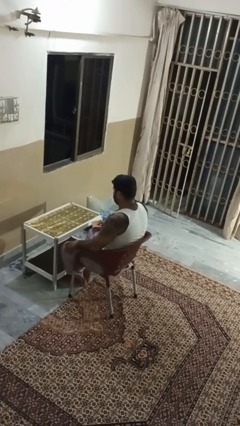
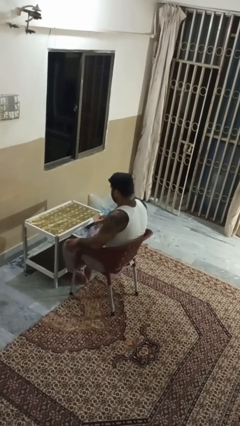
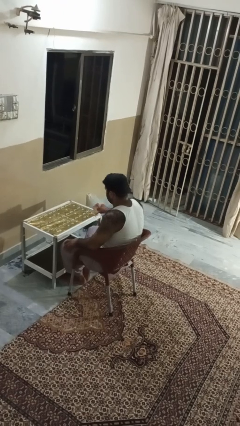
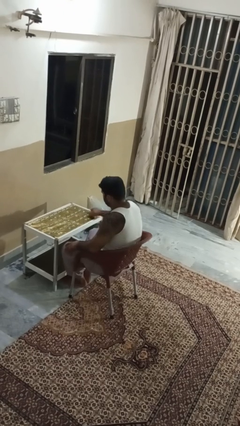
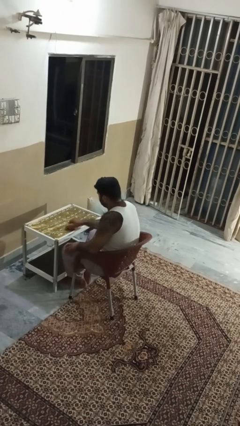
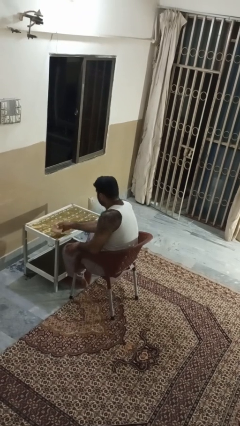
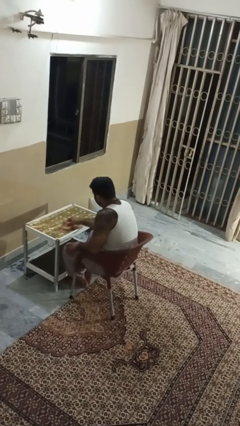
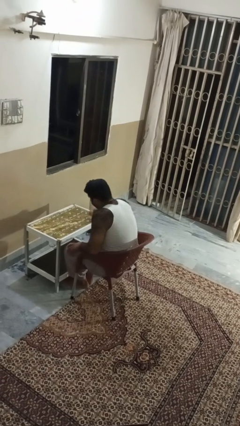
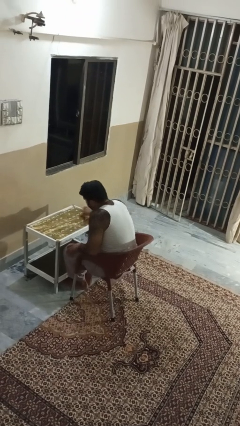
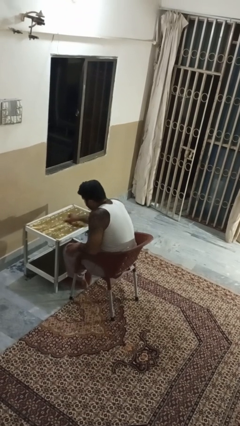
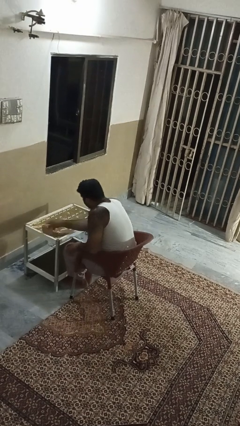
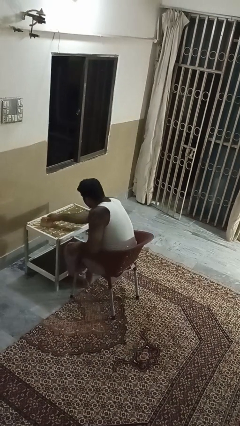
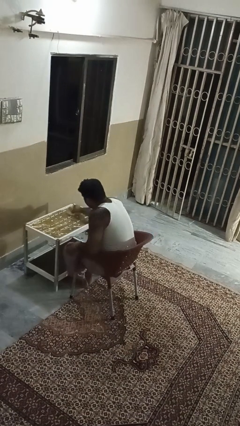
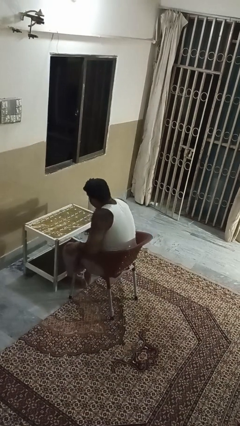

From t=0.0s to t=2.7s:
person cleans table with rag

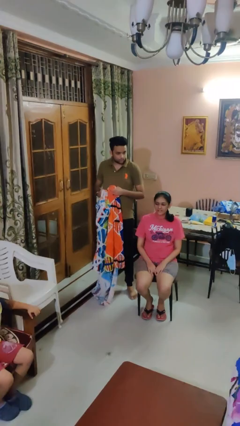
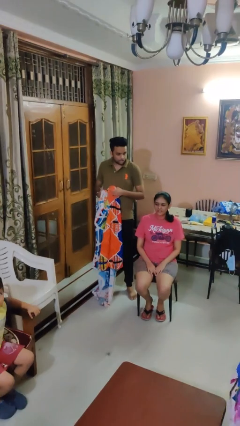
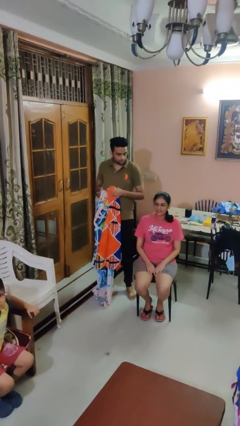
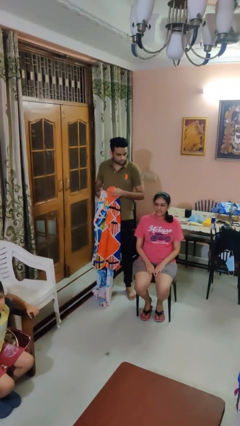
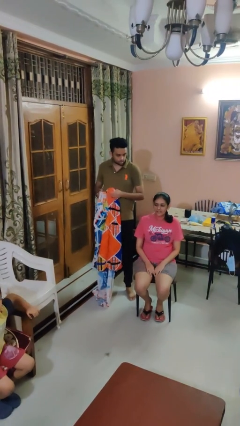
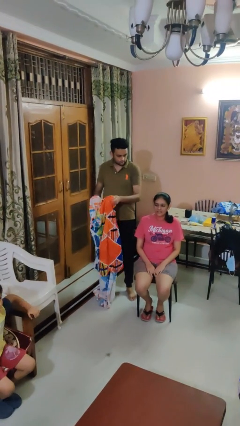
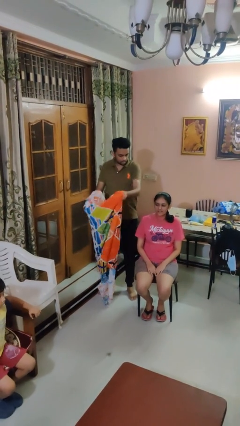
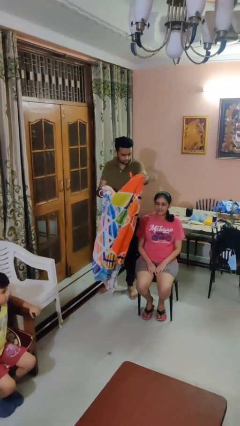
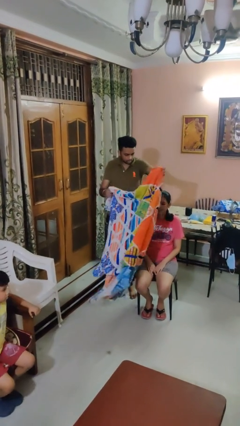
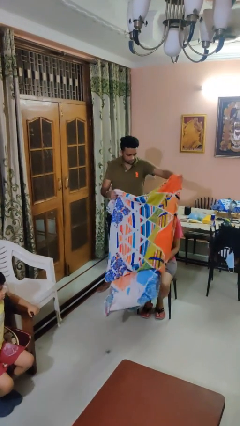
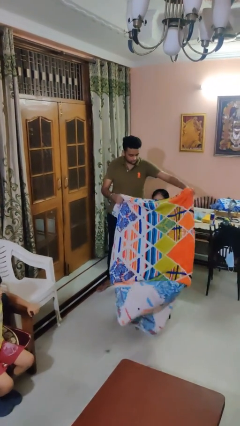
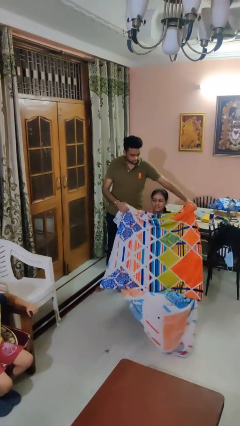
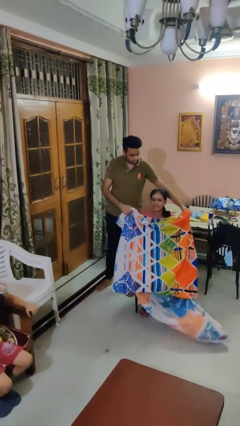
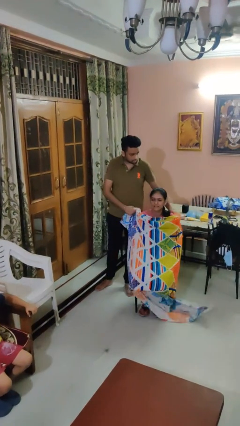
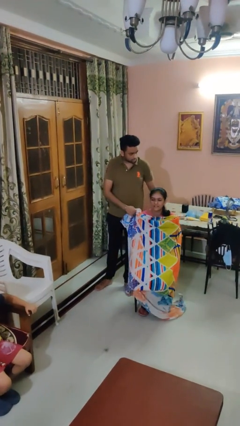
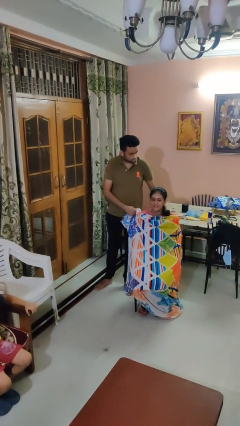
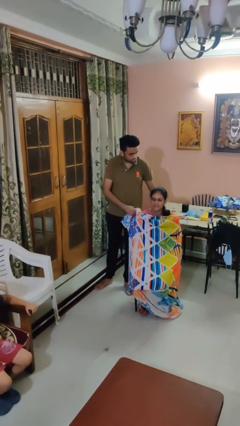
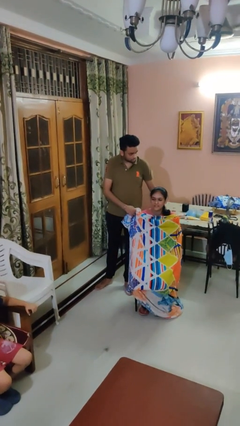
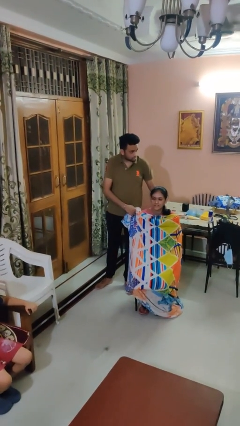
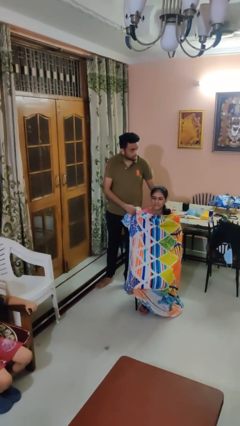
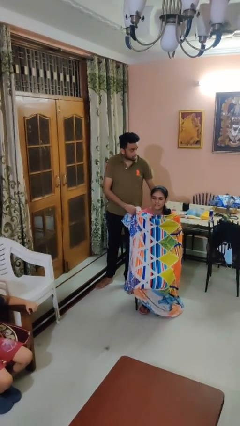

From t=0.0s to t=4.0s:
person covers friend with blanket

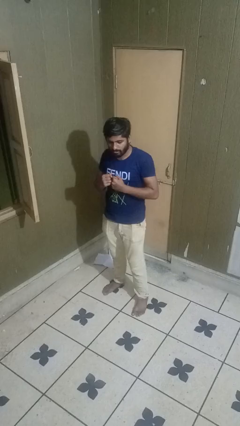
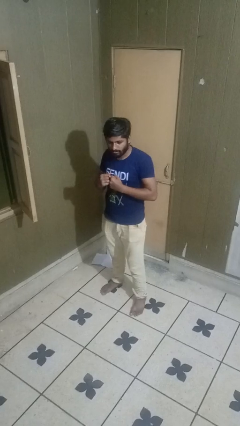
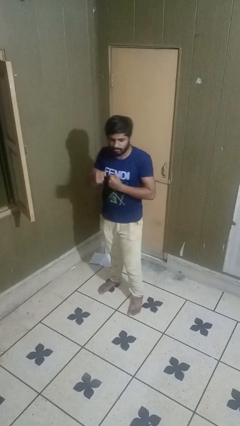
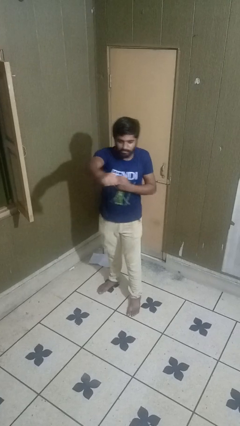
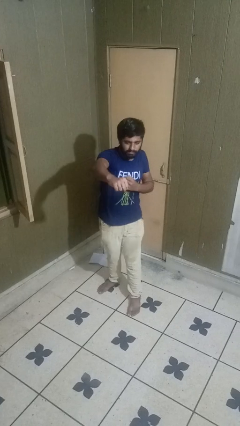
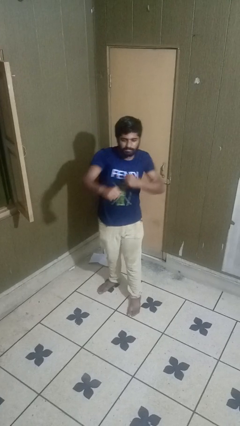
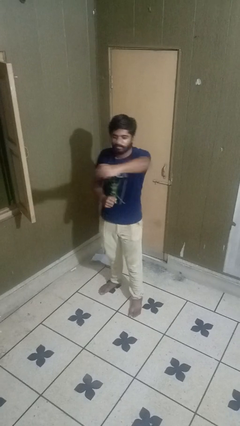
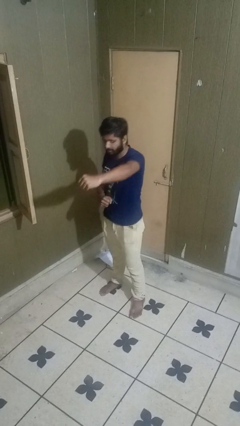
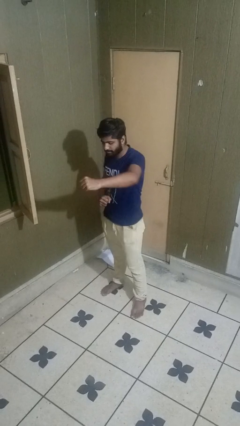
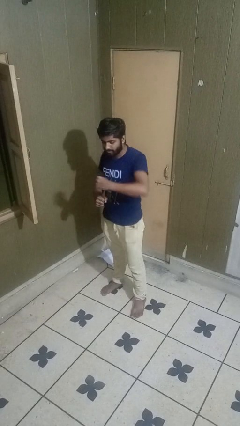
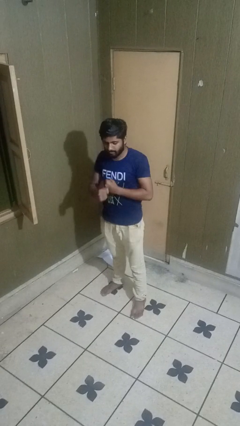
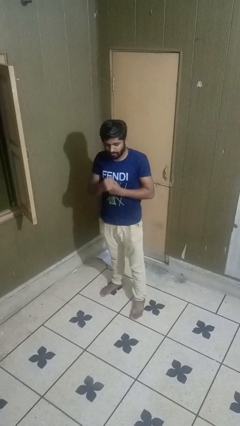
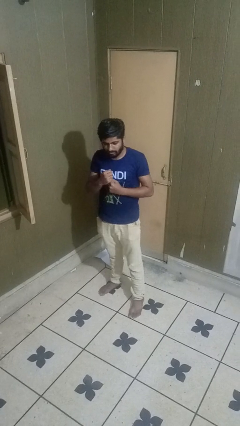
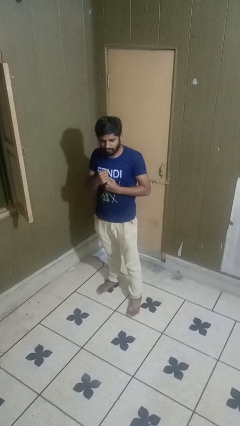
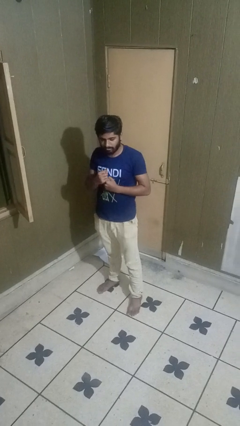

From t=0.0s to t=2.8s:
person punches

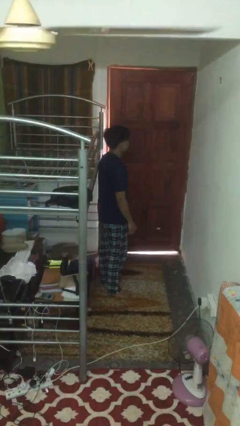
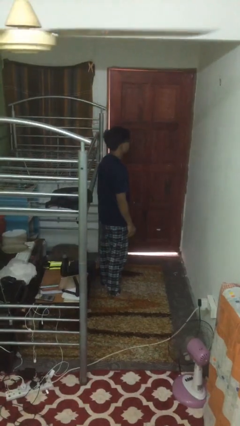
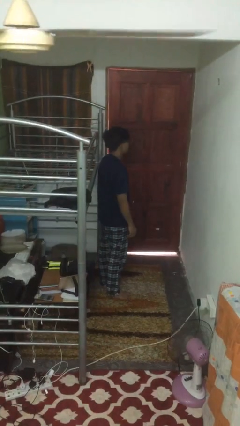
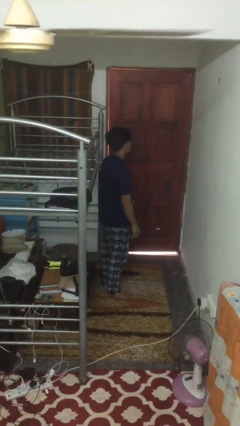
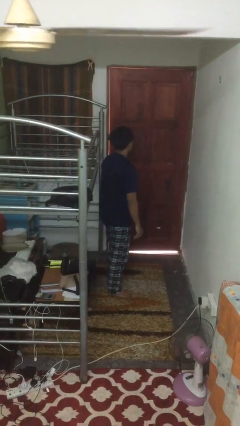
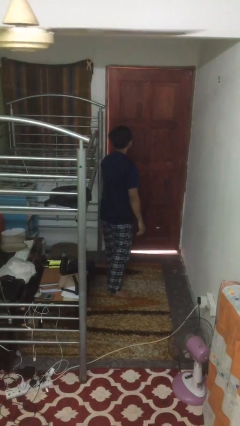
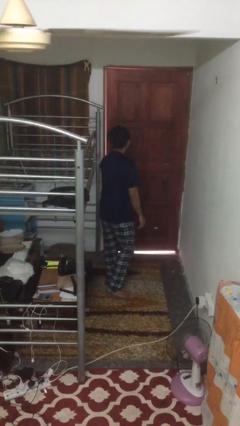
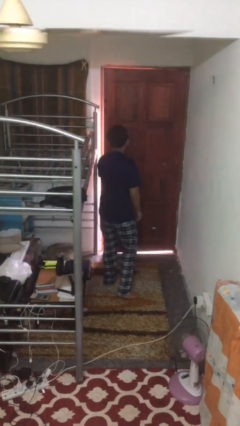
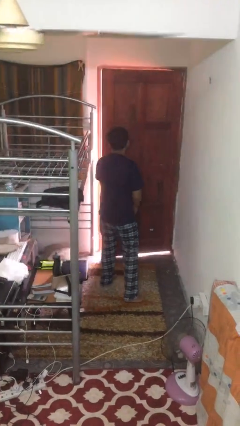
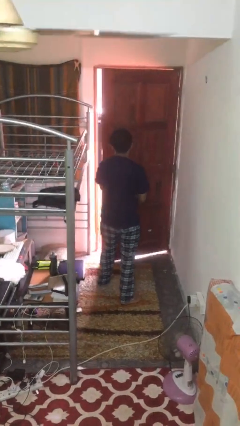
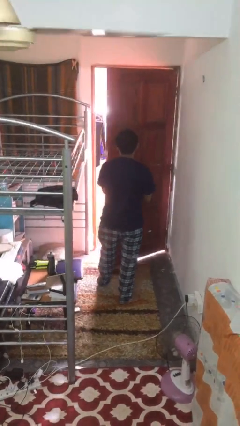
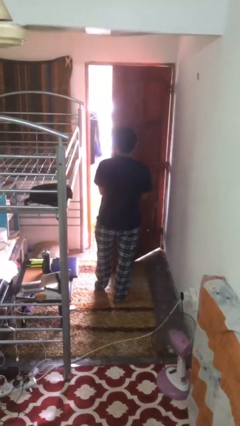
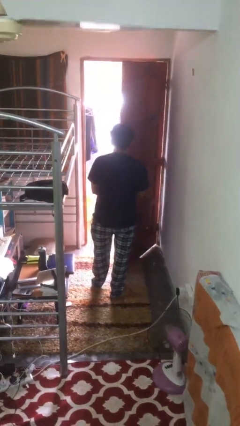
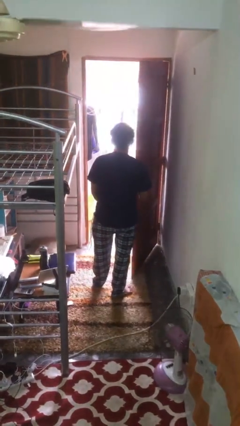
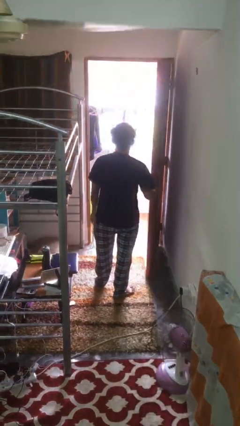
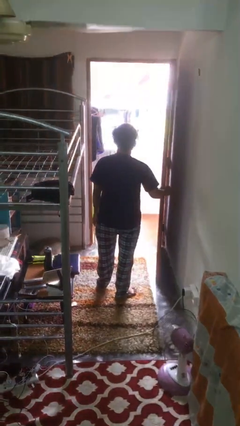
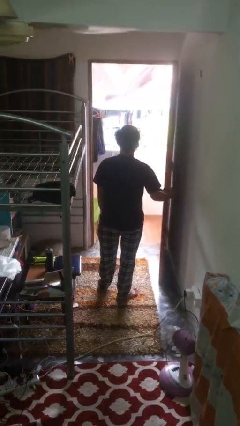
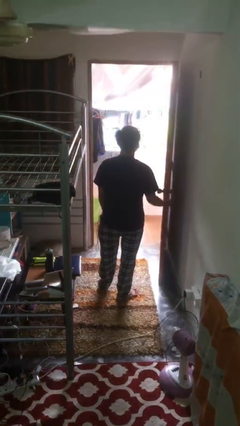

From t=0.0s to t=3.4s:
person opens facility door

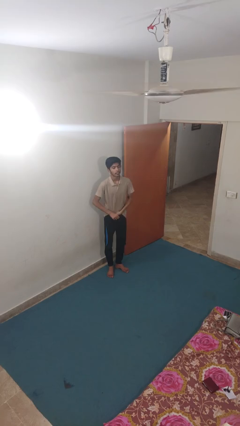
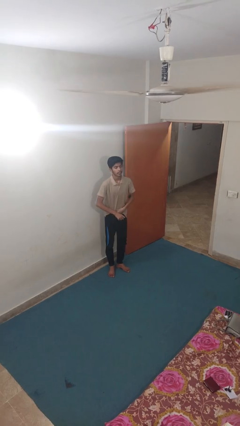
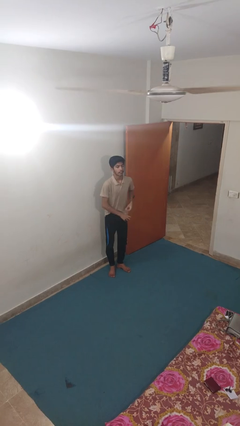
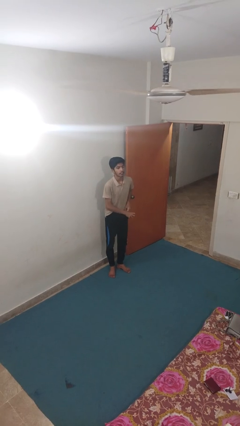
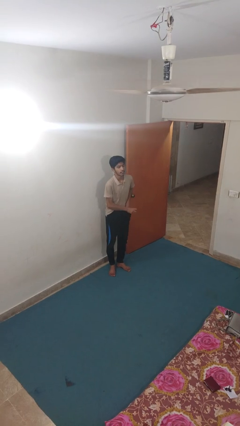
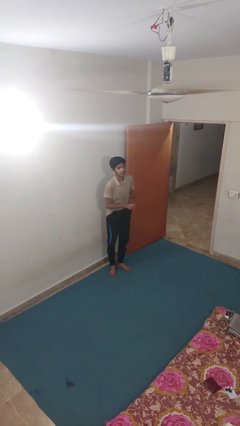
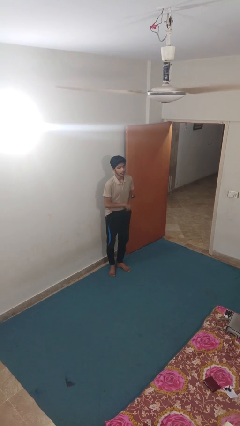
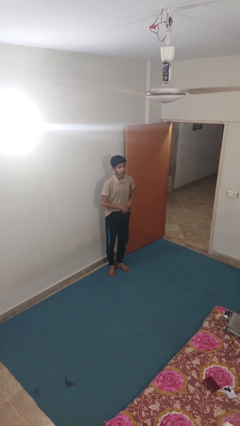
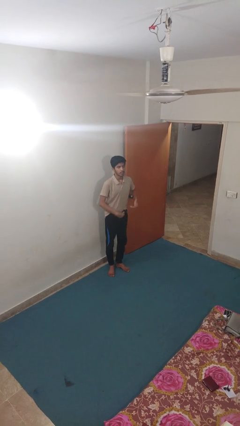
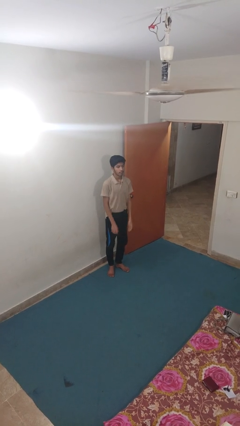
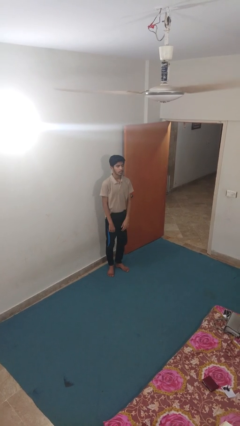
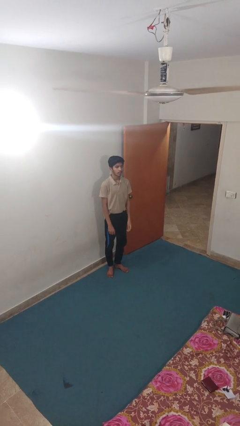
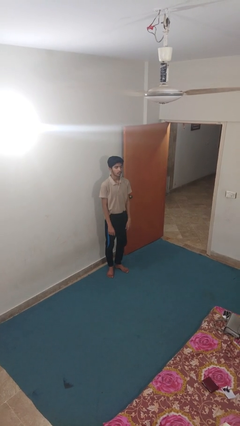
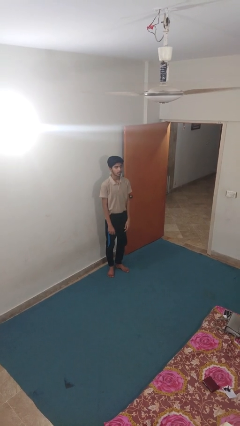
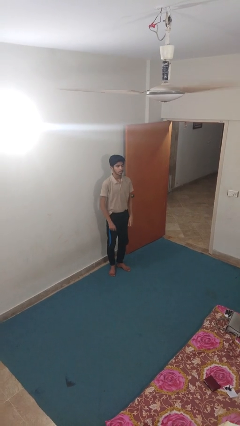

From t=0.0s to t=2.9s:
person tucks in shirt

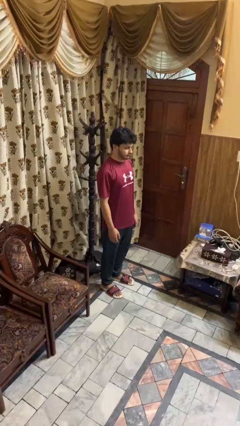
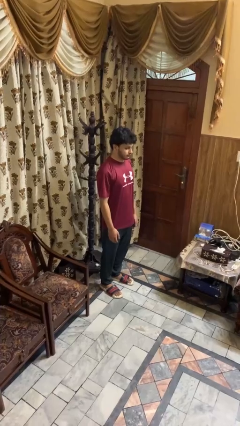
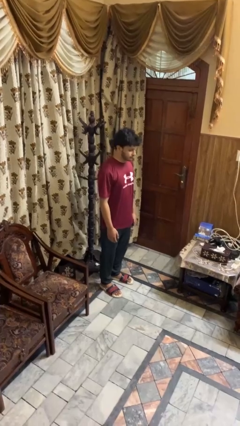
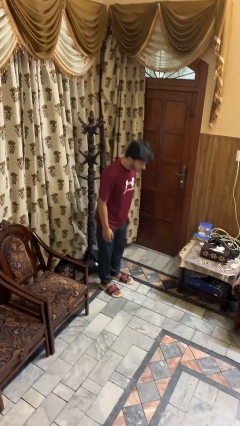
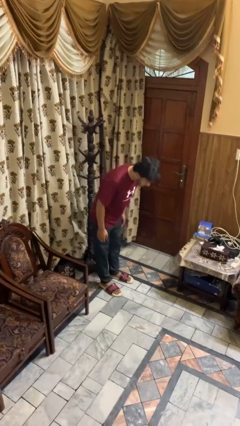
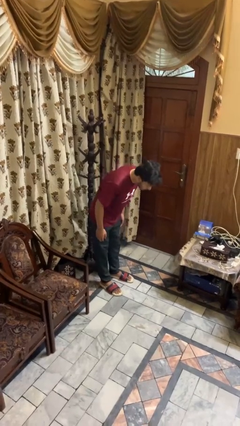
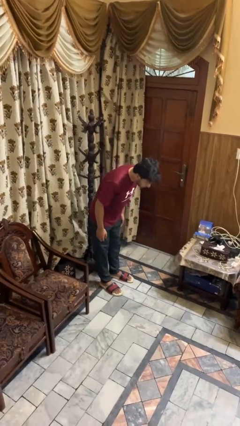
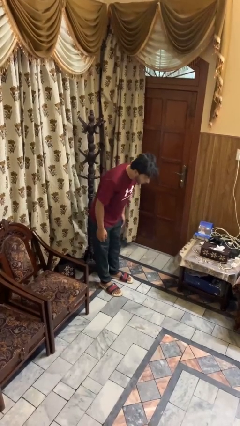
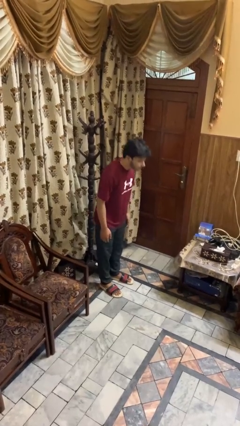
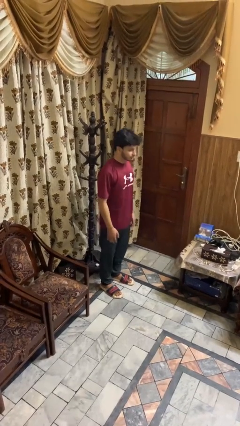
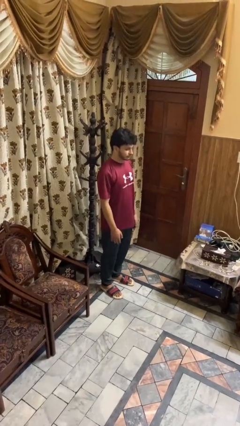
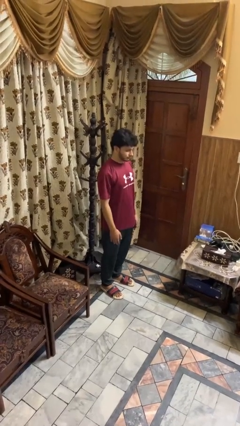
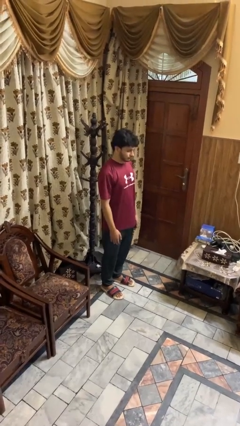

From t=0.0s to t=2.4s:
person bows
